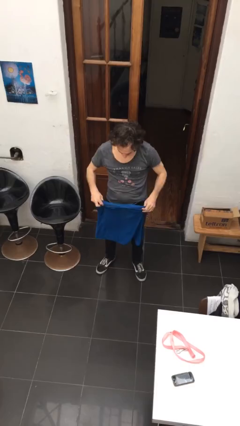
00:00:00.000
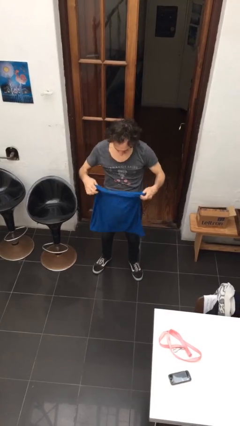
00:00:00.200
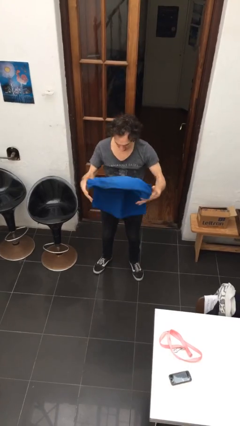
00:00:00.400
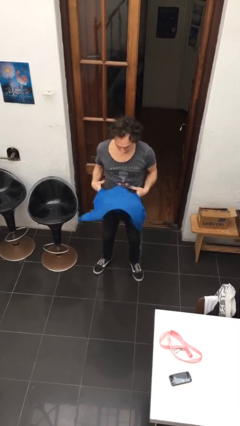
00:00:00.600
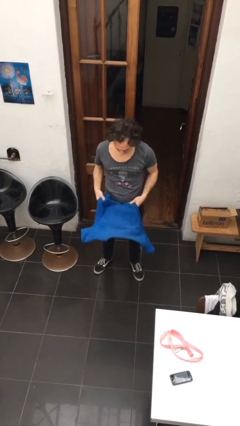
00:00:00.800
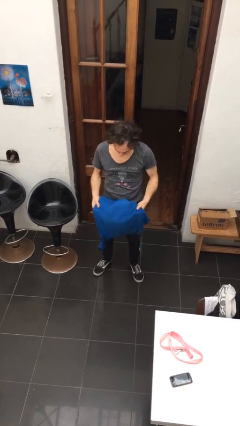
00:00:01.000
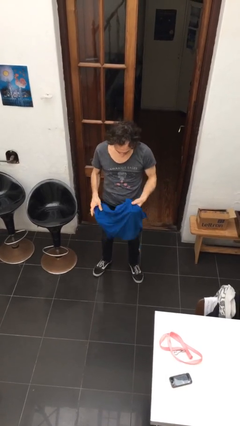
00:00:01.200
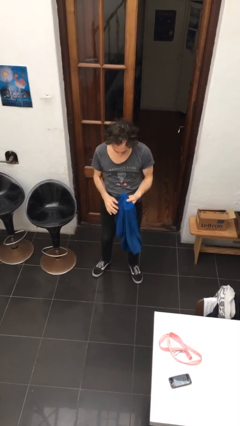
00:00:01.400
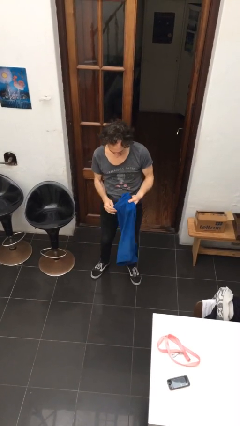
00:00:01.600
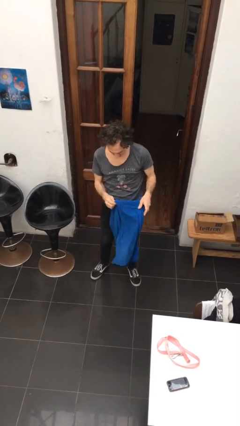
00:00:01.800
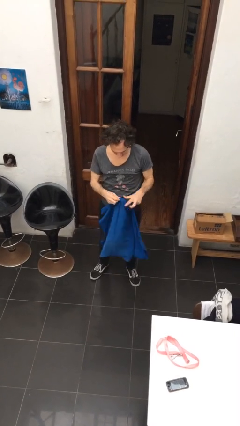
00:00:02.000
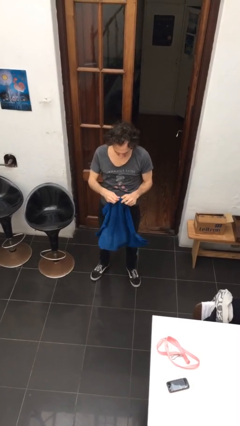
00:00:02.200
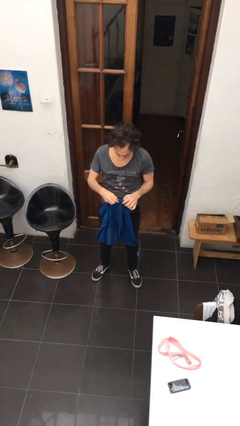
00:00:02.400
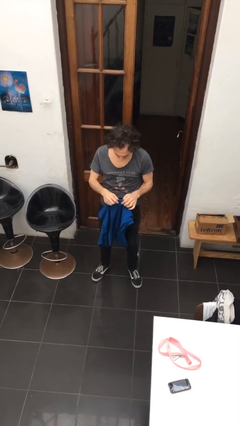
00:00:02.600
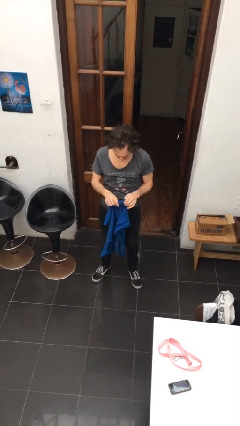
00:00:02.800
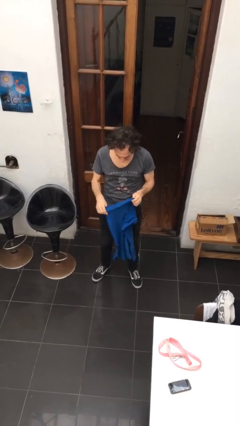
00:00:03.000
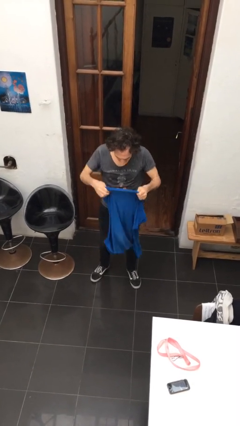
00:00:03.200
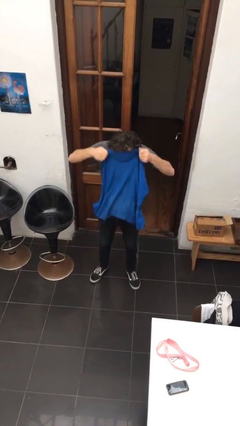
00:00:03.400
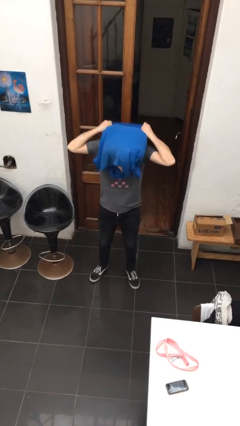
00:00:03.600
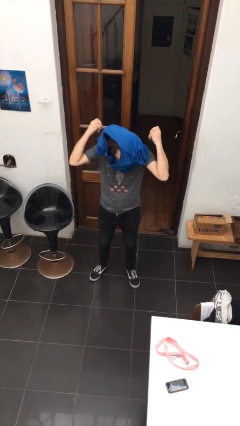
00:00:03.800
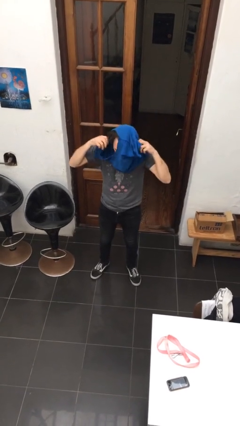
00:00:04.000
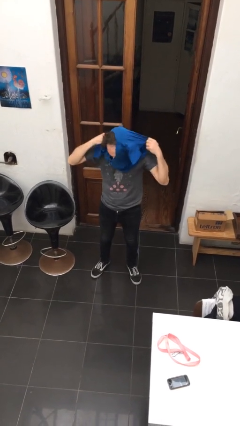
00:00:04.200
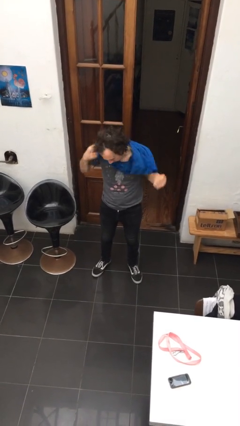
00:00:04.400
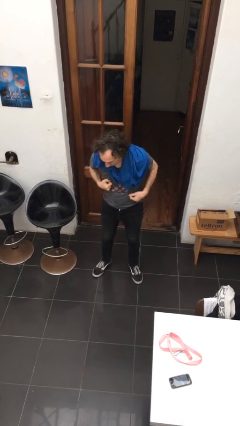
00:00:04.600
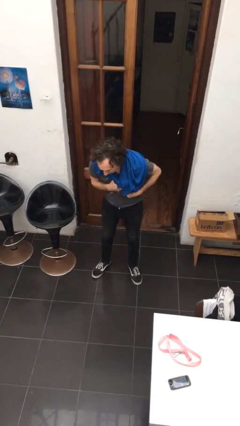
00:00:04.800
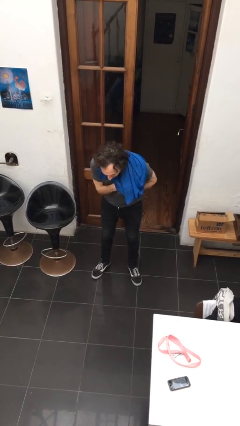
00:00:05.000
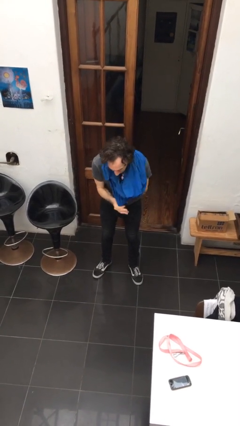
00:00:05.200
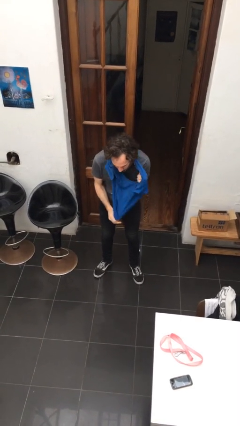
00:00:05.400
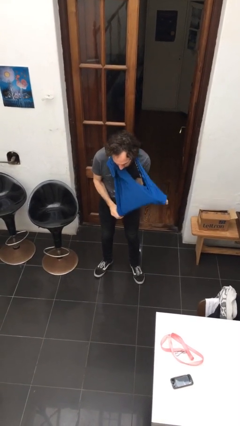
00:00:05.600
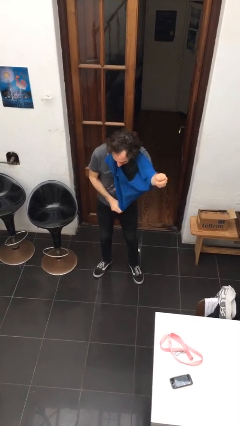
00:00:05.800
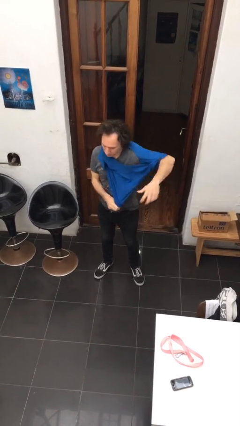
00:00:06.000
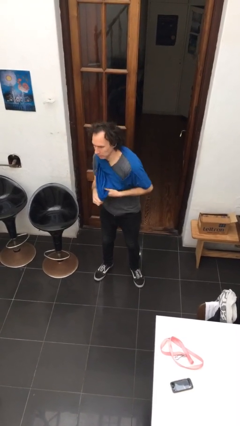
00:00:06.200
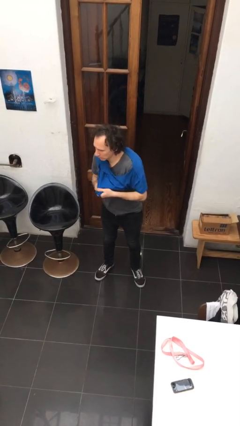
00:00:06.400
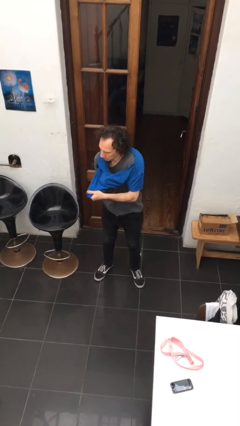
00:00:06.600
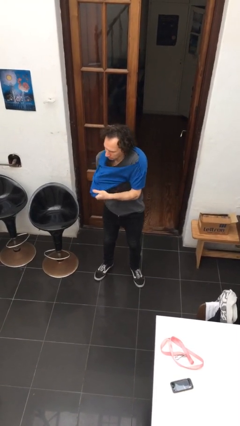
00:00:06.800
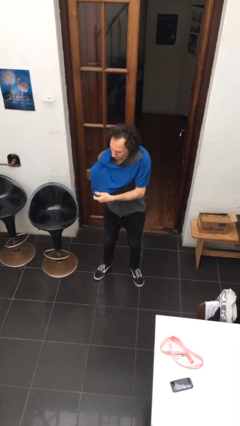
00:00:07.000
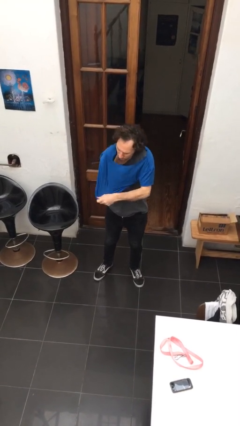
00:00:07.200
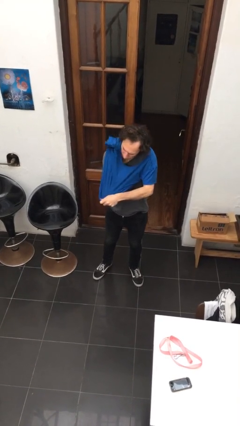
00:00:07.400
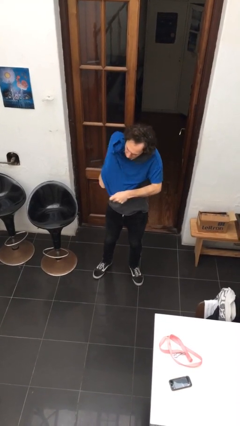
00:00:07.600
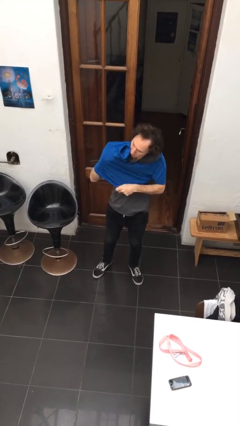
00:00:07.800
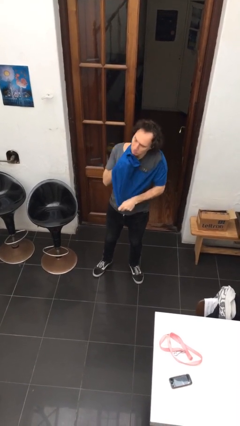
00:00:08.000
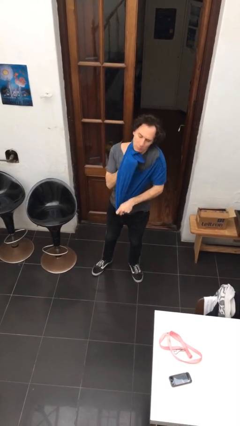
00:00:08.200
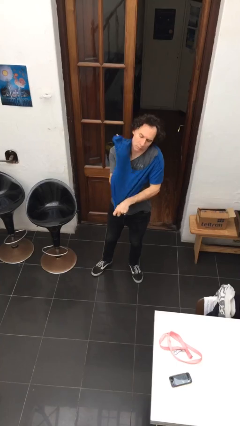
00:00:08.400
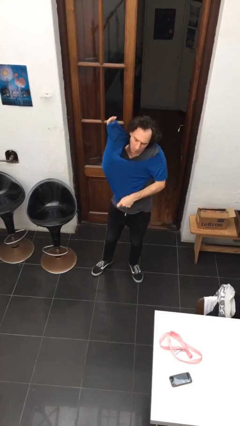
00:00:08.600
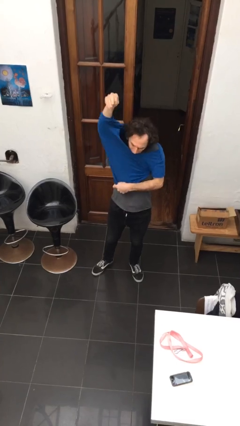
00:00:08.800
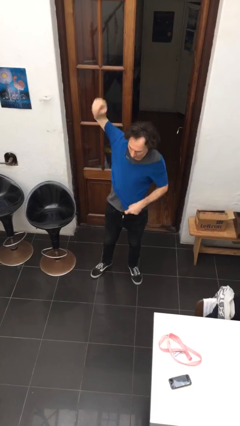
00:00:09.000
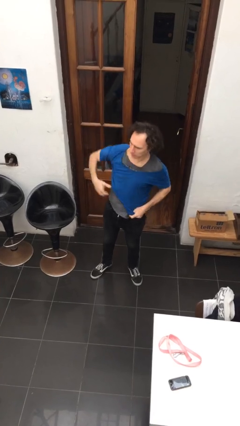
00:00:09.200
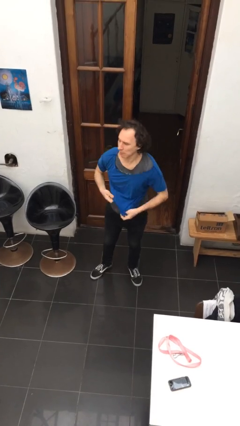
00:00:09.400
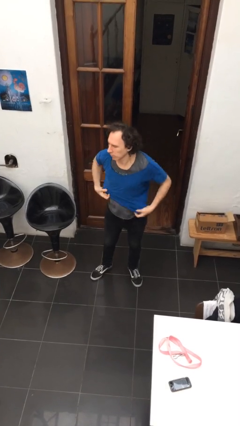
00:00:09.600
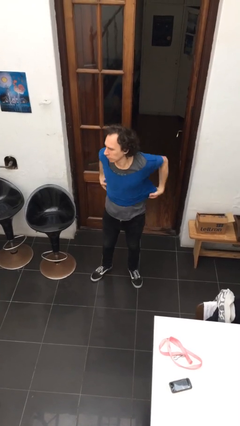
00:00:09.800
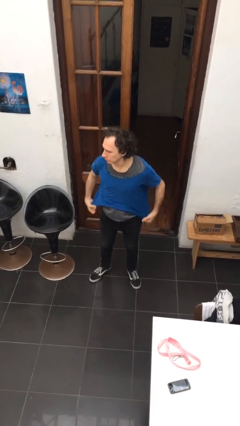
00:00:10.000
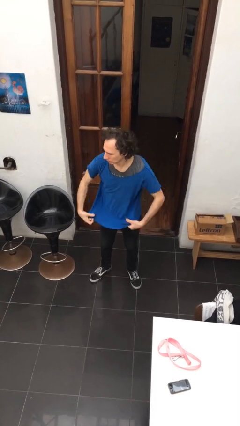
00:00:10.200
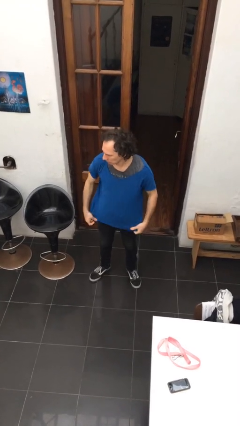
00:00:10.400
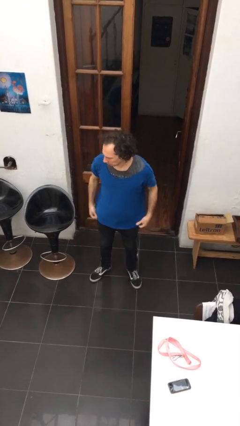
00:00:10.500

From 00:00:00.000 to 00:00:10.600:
person puts on shirt

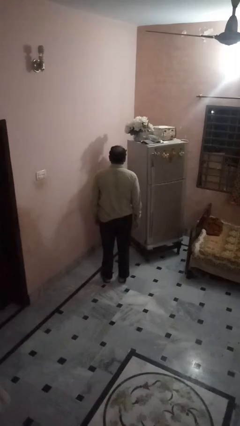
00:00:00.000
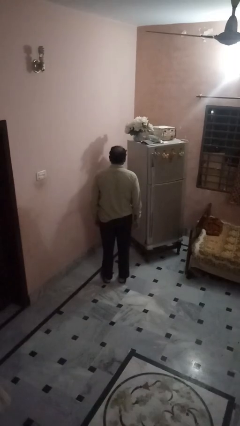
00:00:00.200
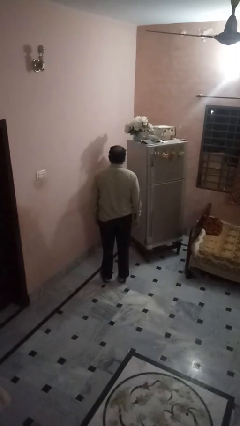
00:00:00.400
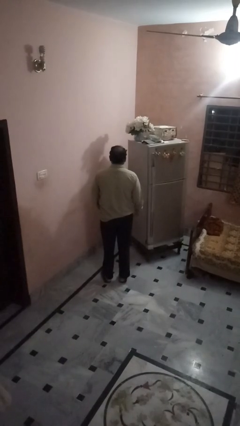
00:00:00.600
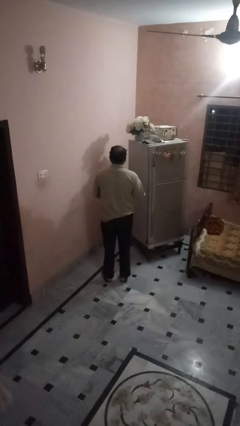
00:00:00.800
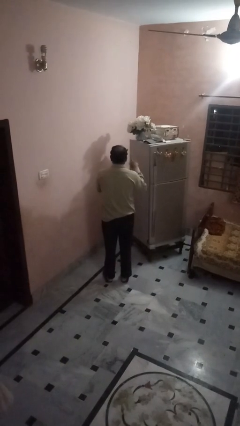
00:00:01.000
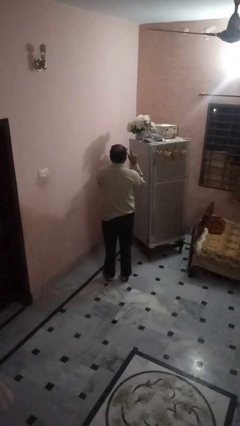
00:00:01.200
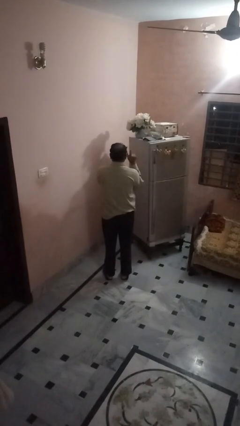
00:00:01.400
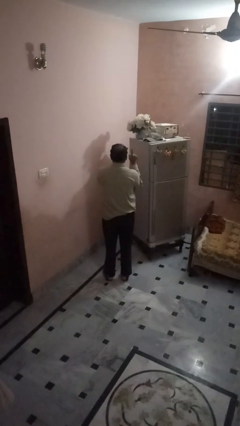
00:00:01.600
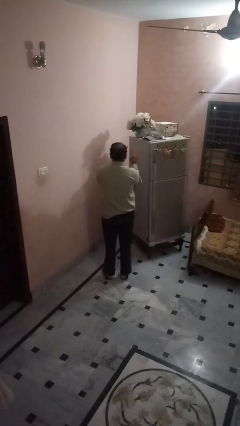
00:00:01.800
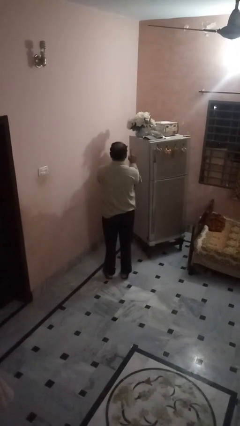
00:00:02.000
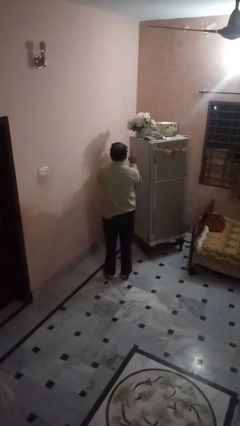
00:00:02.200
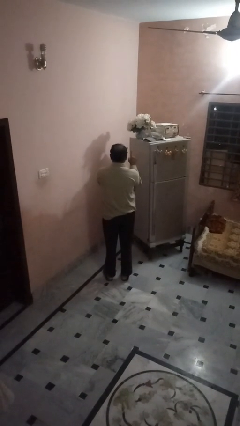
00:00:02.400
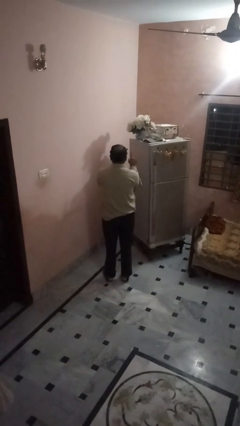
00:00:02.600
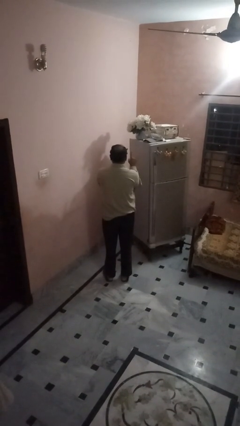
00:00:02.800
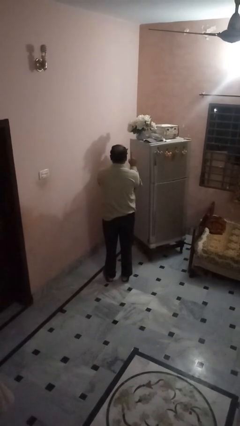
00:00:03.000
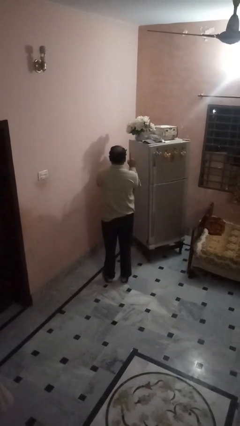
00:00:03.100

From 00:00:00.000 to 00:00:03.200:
person gestures number one

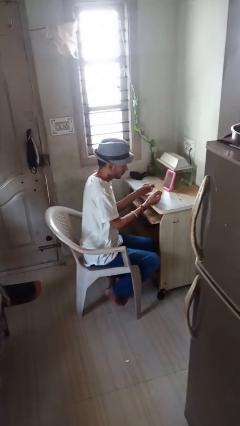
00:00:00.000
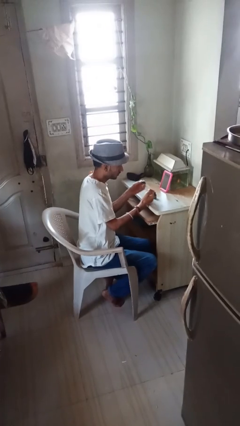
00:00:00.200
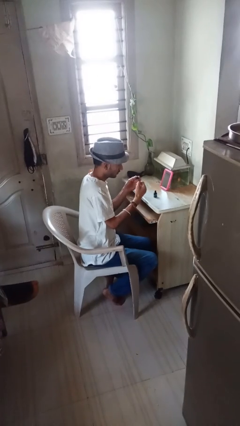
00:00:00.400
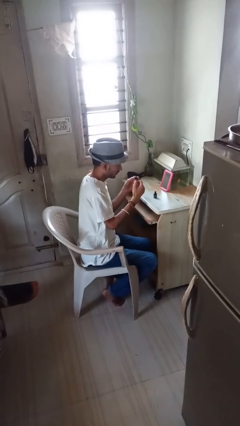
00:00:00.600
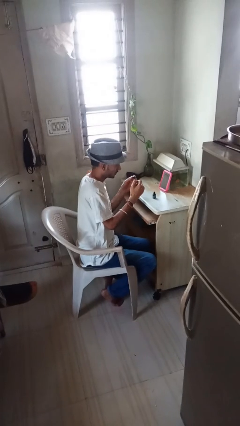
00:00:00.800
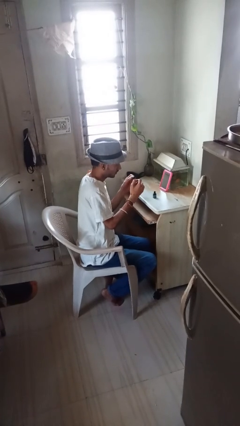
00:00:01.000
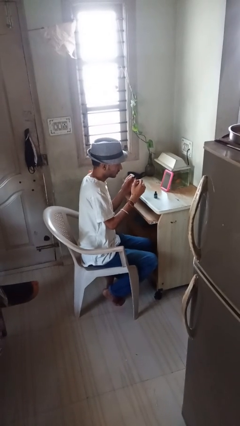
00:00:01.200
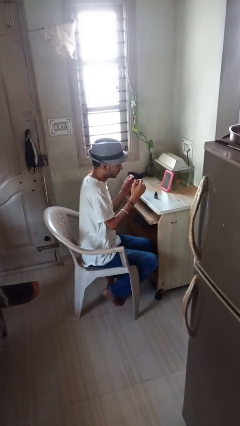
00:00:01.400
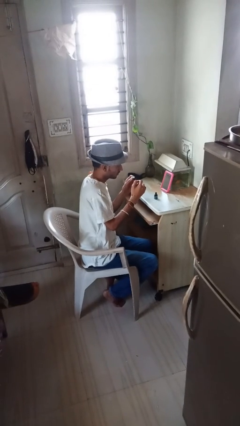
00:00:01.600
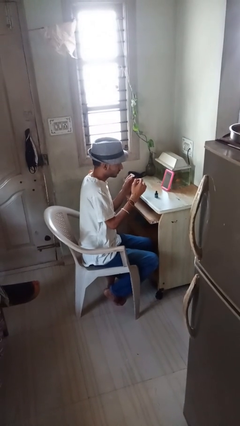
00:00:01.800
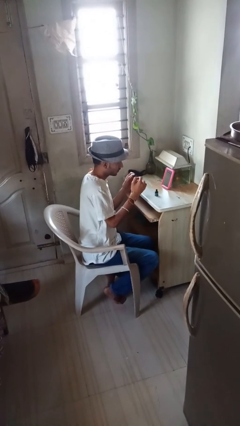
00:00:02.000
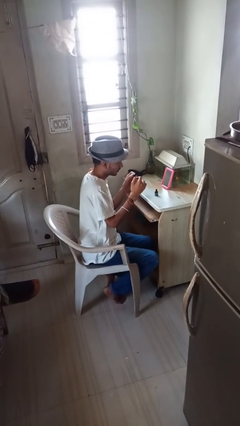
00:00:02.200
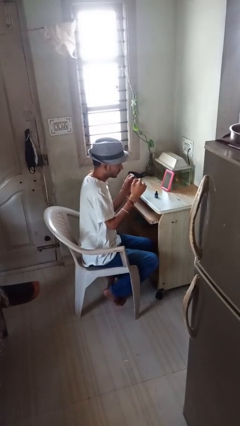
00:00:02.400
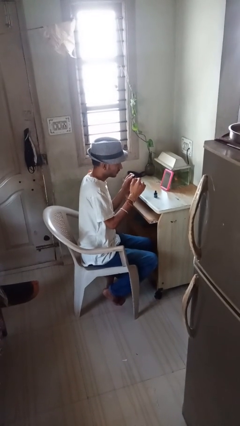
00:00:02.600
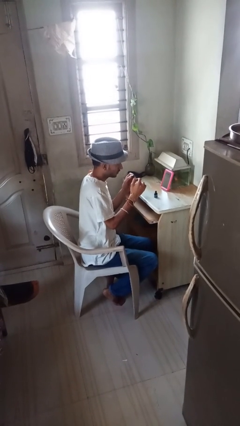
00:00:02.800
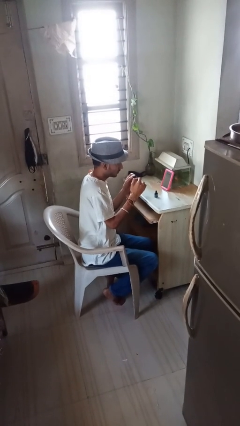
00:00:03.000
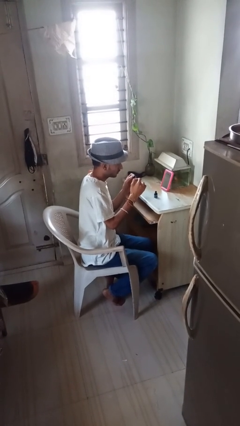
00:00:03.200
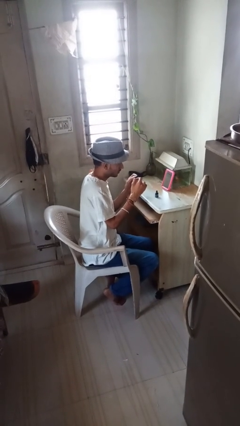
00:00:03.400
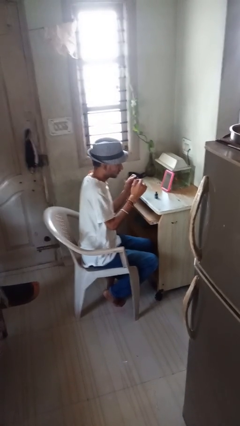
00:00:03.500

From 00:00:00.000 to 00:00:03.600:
person paints fingernails

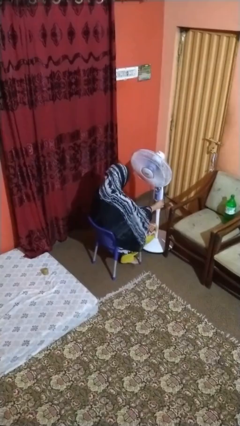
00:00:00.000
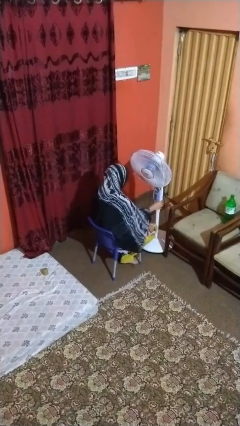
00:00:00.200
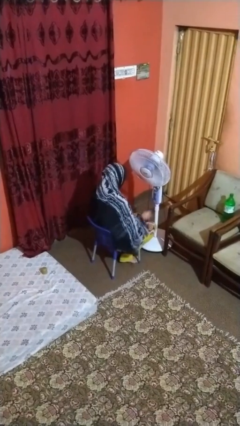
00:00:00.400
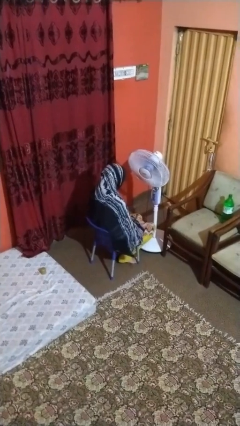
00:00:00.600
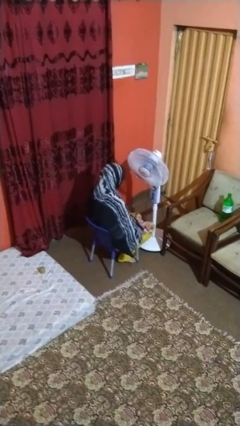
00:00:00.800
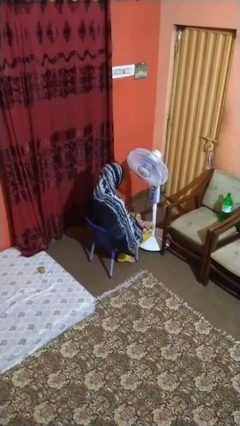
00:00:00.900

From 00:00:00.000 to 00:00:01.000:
person turns off fan
